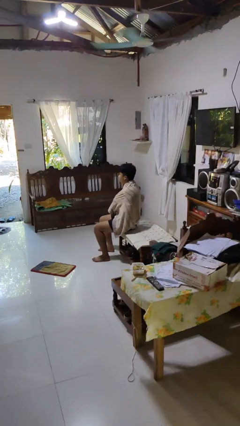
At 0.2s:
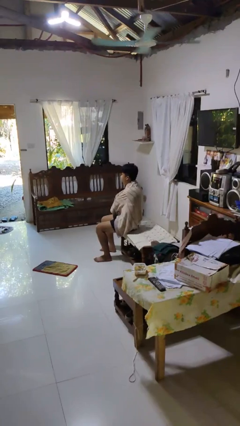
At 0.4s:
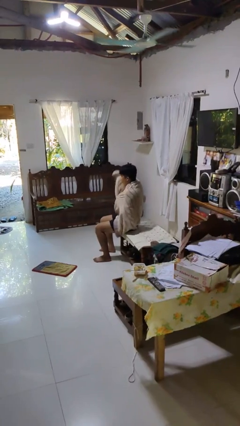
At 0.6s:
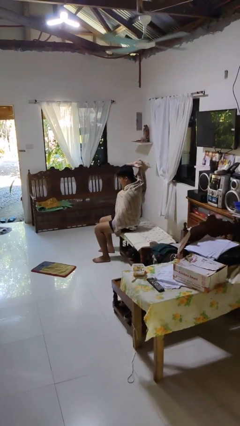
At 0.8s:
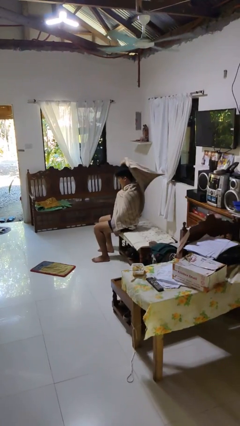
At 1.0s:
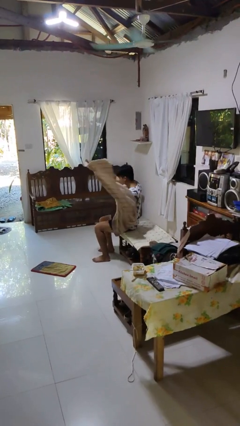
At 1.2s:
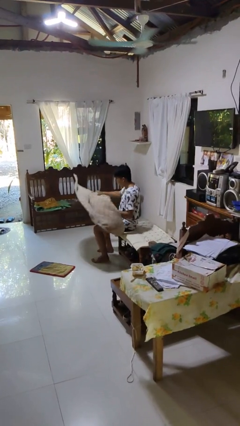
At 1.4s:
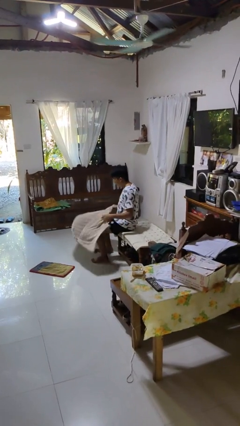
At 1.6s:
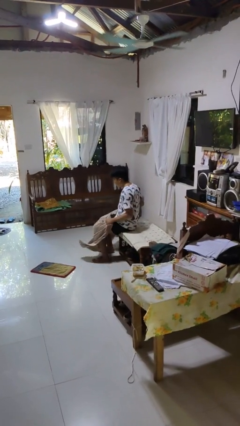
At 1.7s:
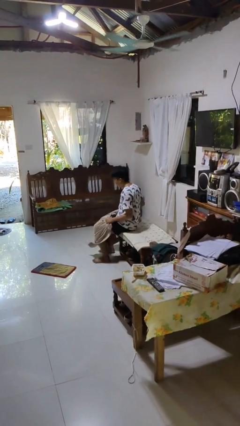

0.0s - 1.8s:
person uncovers with blanket

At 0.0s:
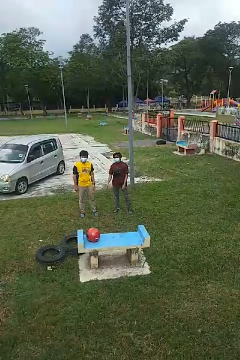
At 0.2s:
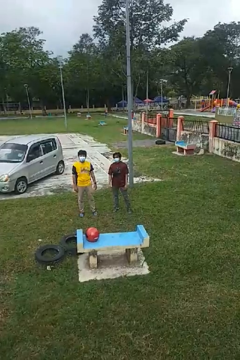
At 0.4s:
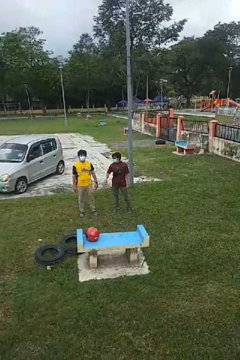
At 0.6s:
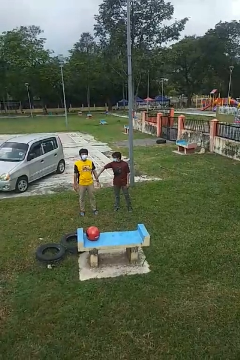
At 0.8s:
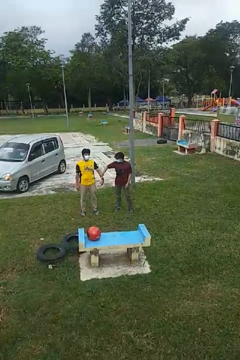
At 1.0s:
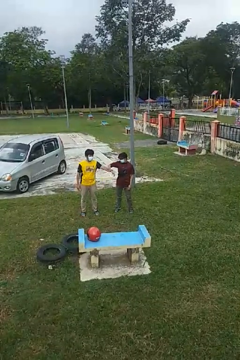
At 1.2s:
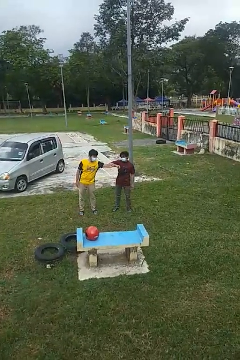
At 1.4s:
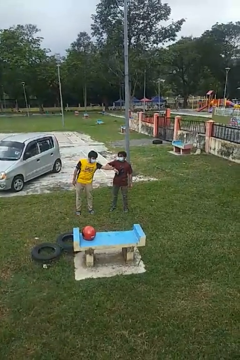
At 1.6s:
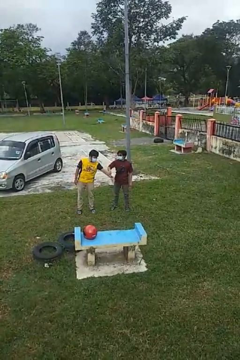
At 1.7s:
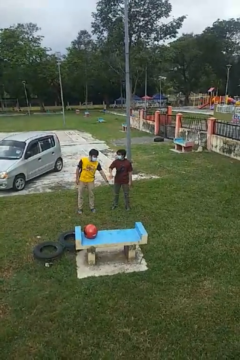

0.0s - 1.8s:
person grabs person by forearm

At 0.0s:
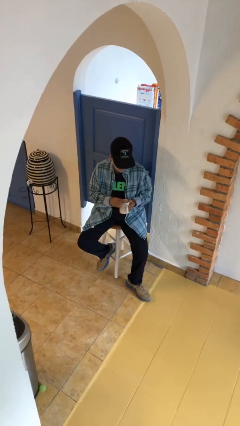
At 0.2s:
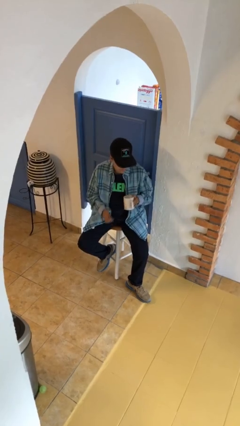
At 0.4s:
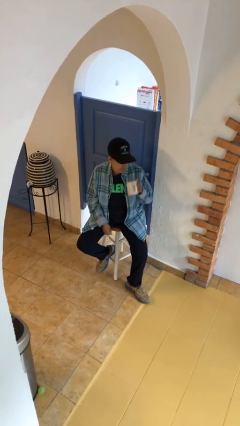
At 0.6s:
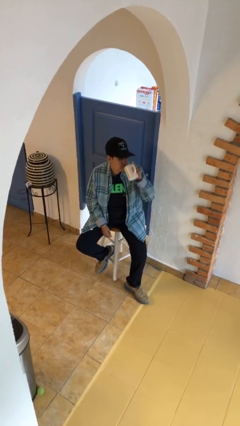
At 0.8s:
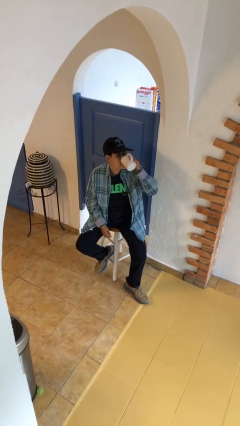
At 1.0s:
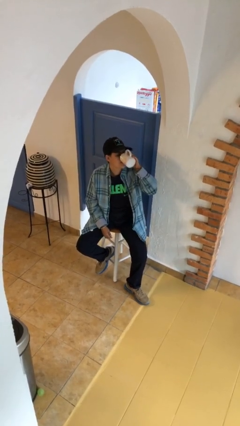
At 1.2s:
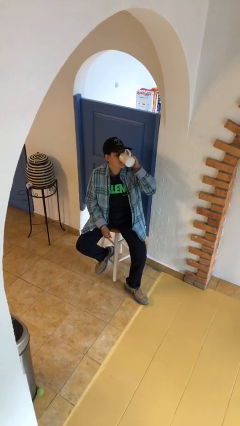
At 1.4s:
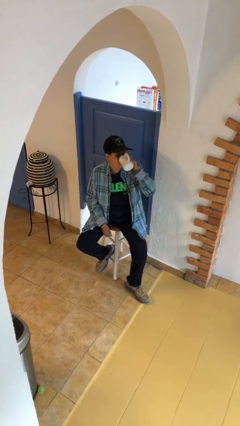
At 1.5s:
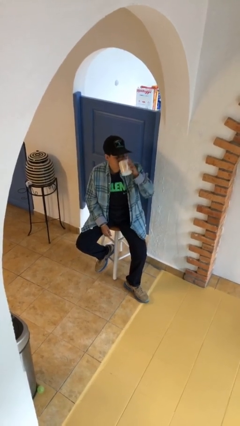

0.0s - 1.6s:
person drinks from mug

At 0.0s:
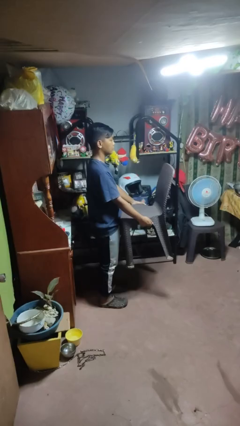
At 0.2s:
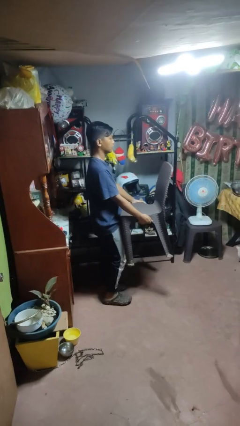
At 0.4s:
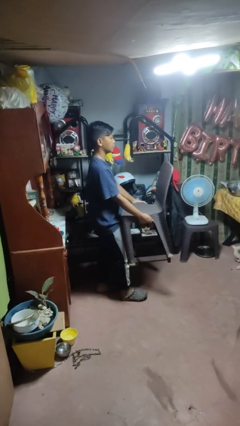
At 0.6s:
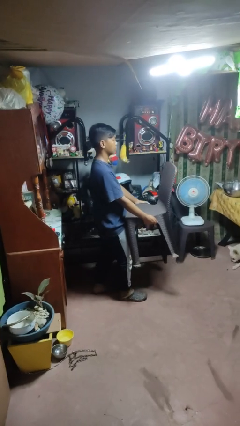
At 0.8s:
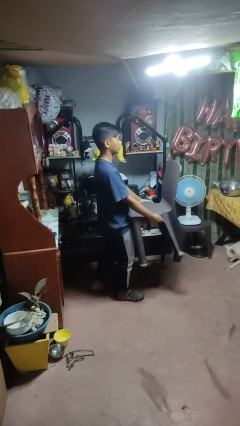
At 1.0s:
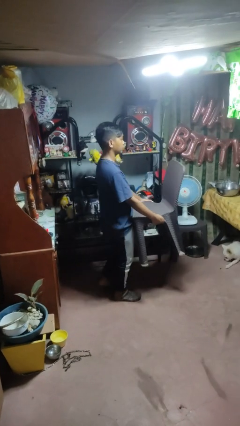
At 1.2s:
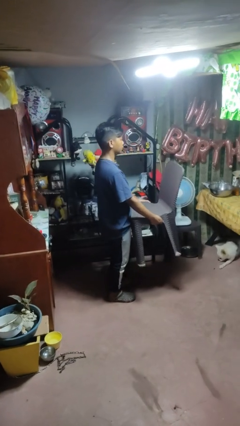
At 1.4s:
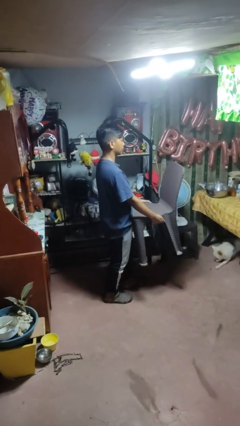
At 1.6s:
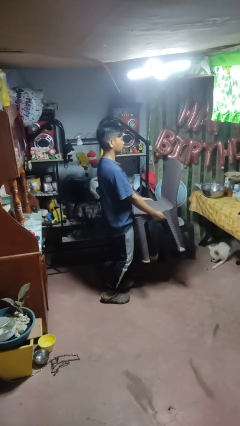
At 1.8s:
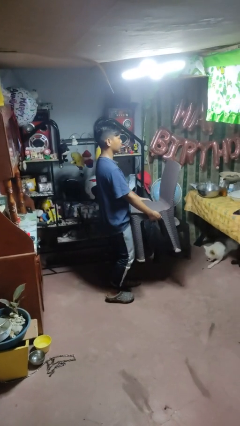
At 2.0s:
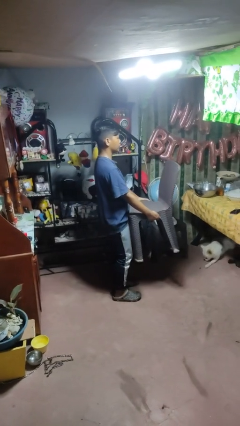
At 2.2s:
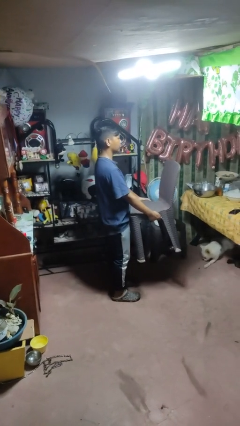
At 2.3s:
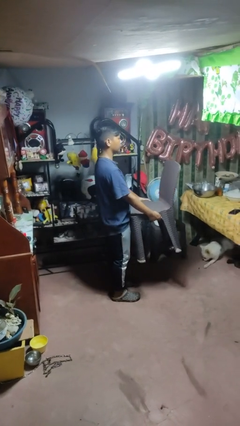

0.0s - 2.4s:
person carries furniture

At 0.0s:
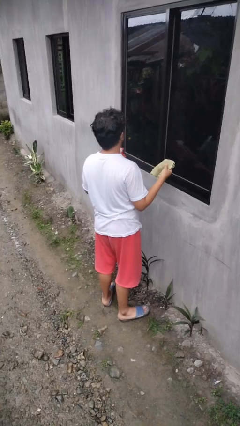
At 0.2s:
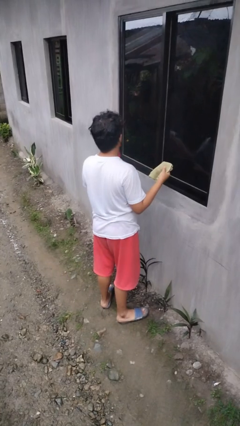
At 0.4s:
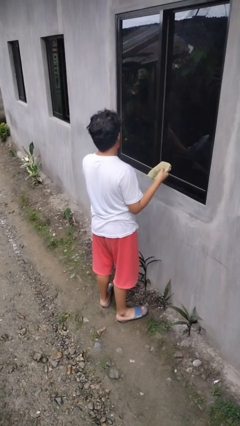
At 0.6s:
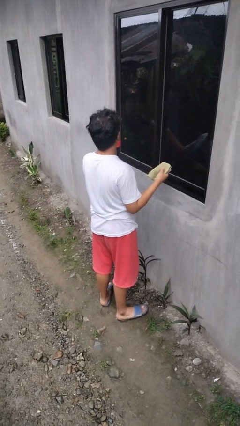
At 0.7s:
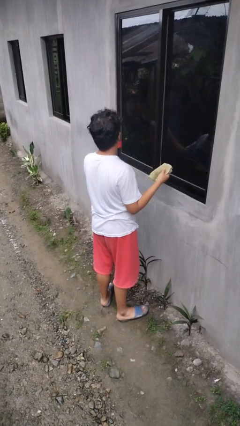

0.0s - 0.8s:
person sprays from bottle

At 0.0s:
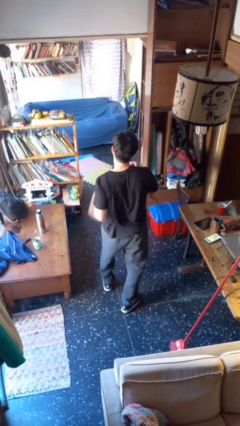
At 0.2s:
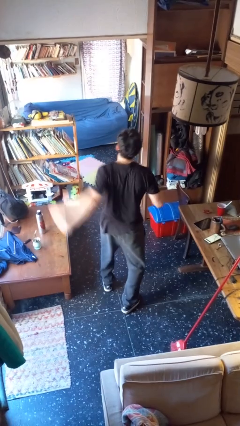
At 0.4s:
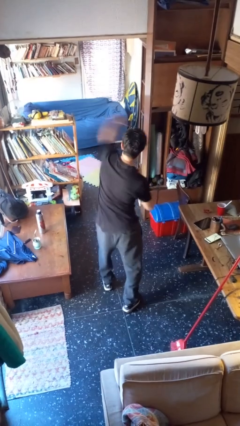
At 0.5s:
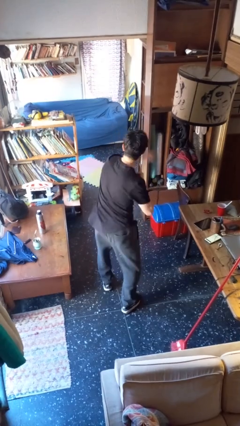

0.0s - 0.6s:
person punches

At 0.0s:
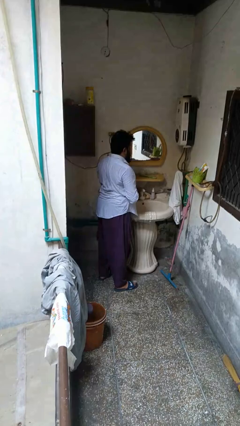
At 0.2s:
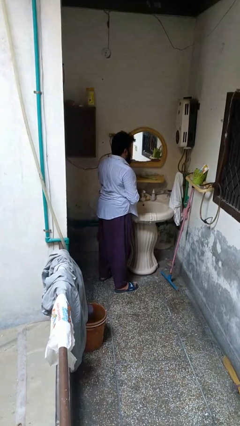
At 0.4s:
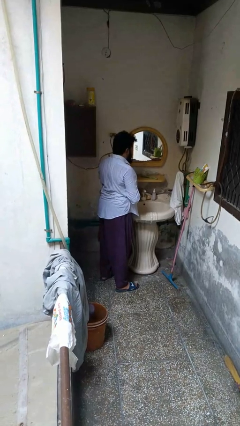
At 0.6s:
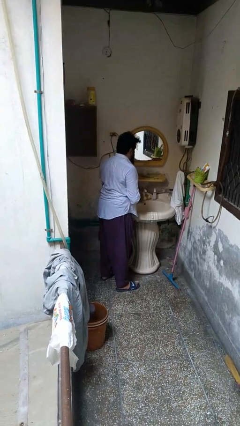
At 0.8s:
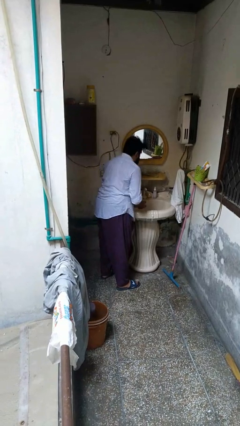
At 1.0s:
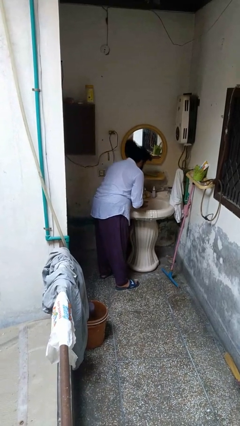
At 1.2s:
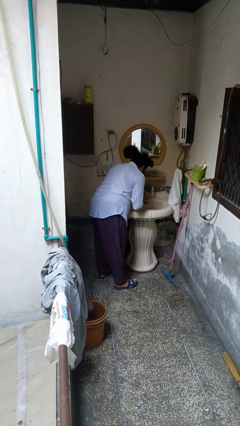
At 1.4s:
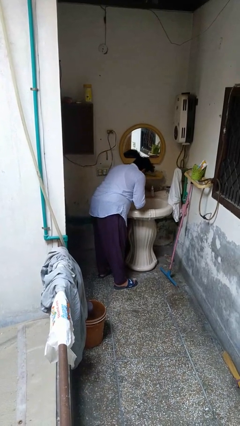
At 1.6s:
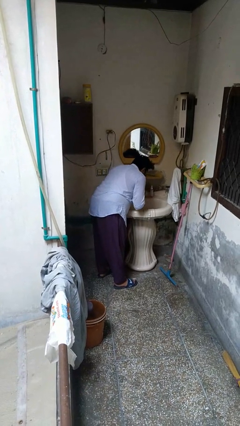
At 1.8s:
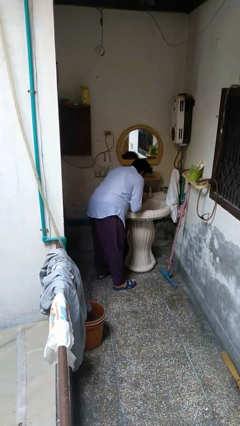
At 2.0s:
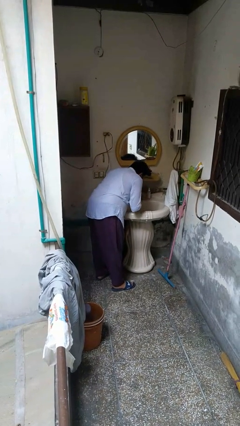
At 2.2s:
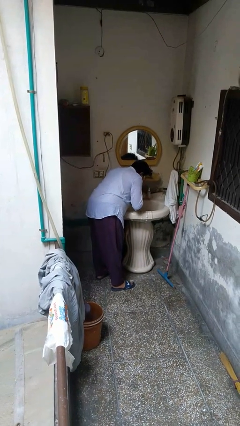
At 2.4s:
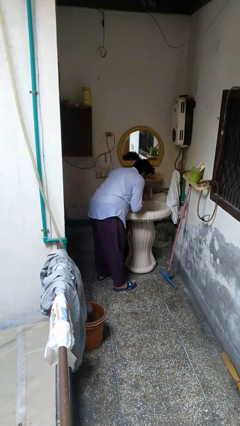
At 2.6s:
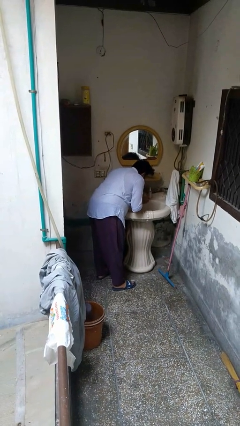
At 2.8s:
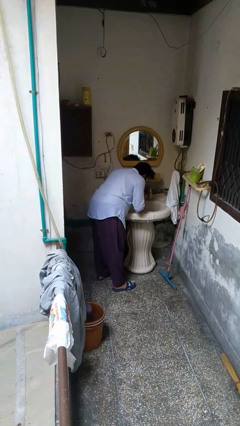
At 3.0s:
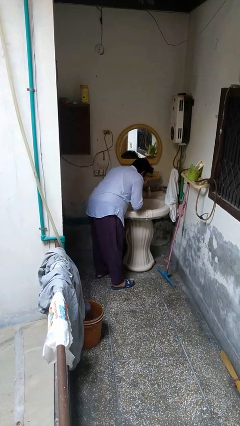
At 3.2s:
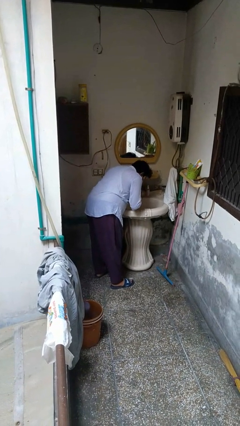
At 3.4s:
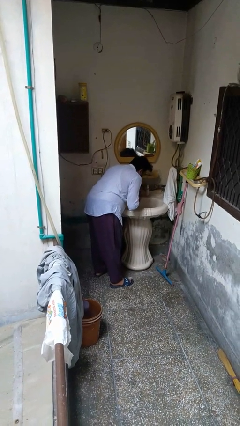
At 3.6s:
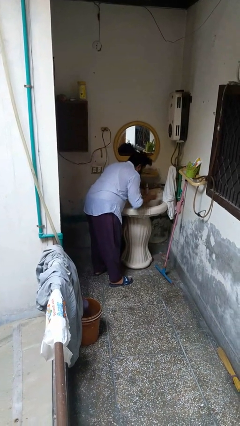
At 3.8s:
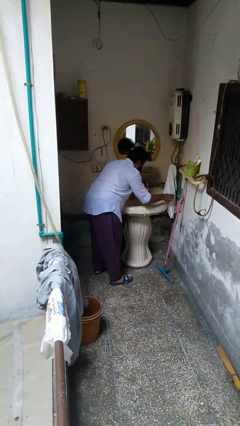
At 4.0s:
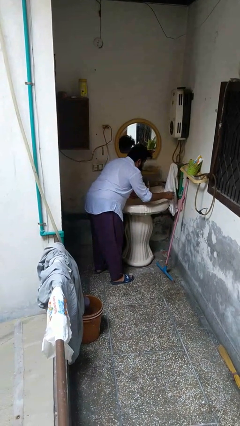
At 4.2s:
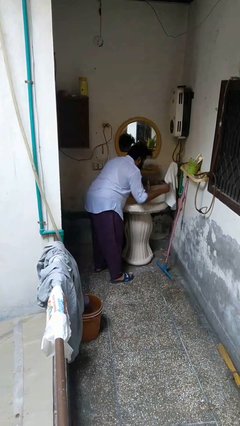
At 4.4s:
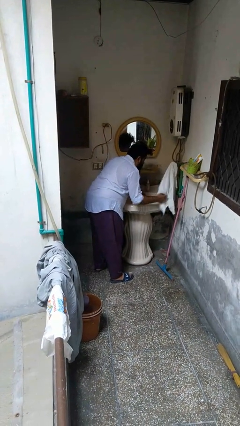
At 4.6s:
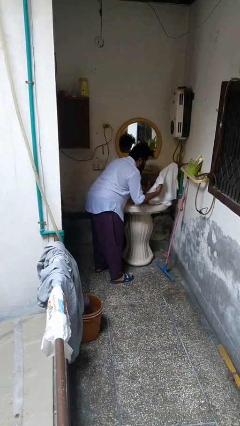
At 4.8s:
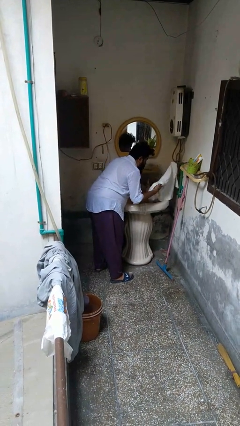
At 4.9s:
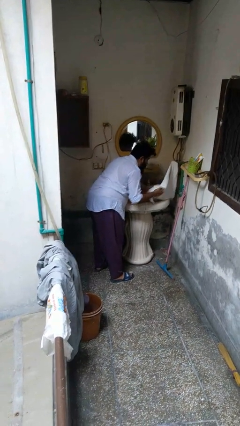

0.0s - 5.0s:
person washes face

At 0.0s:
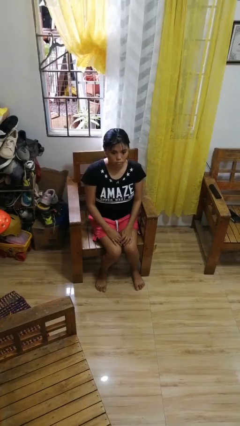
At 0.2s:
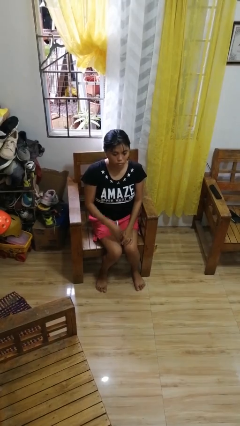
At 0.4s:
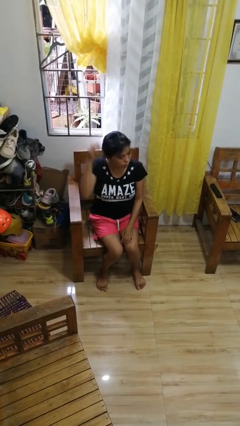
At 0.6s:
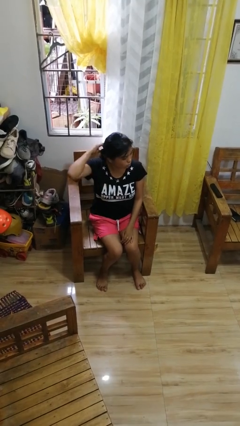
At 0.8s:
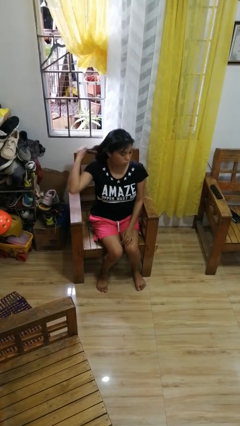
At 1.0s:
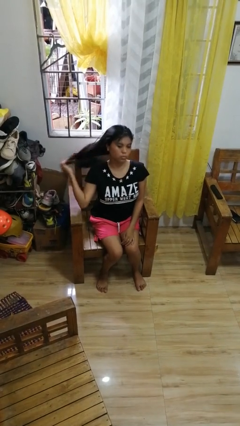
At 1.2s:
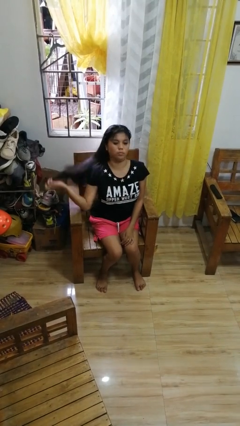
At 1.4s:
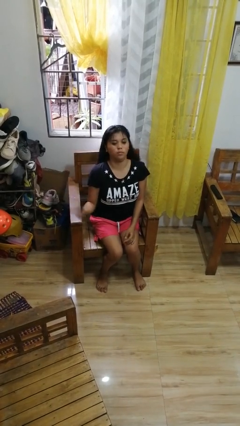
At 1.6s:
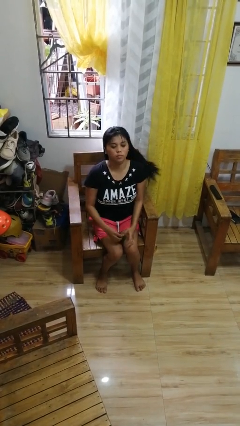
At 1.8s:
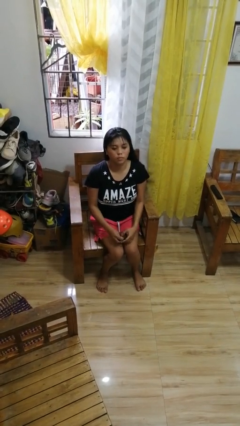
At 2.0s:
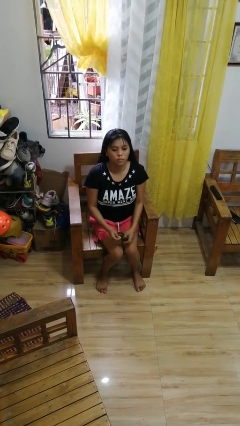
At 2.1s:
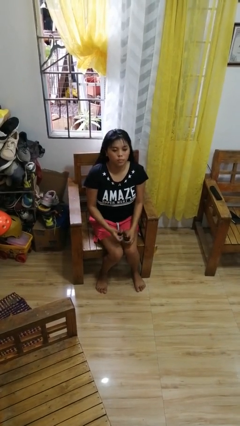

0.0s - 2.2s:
person takes off hairtie

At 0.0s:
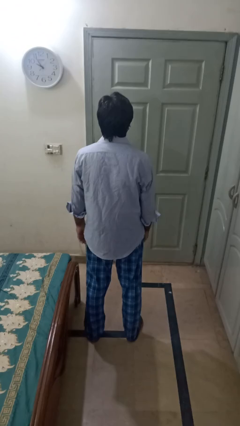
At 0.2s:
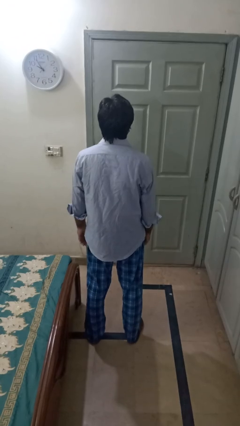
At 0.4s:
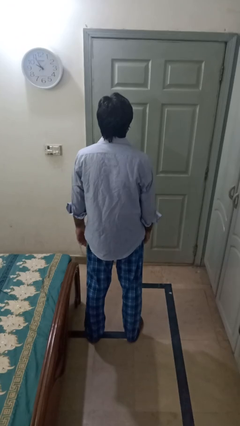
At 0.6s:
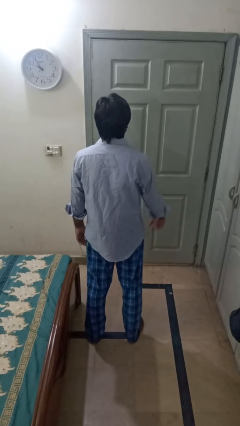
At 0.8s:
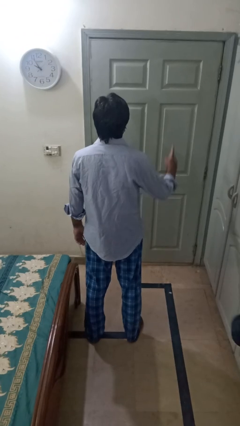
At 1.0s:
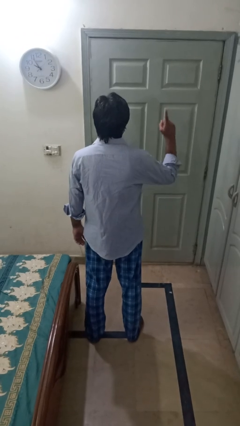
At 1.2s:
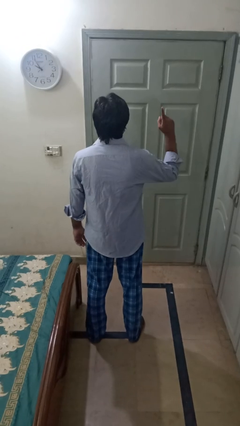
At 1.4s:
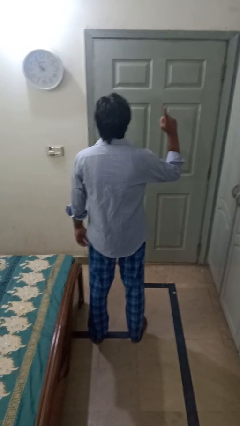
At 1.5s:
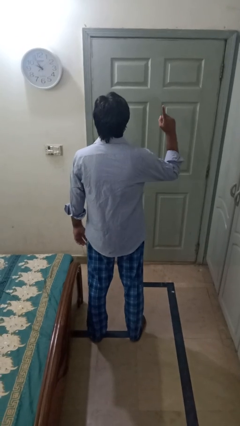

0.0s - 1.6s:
person gestures number one
